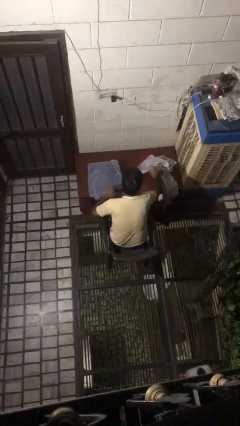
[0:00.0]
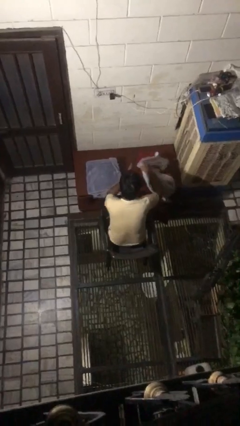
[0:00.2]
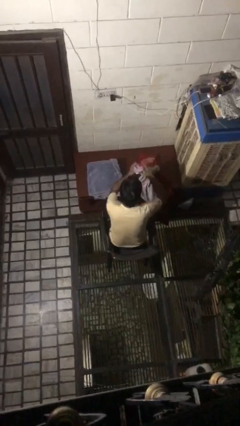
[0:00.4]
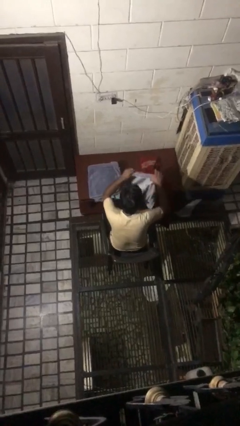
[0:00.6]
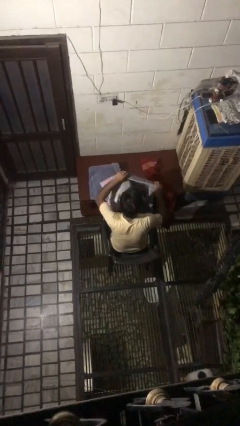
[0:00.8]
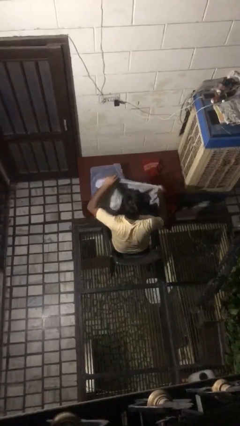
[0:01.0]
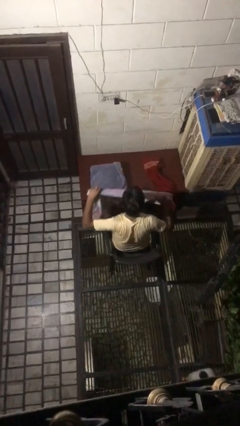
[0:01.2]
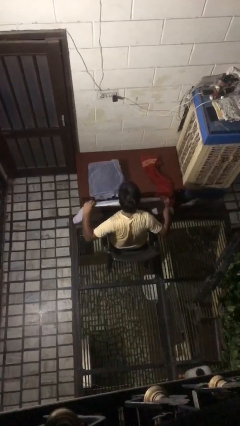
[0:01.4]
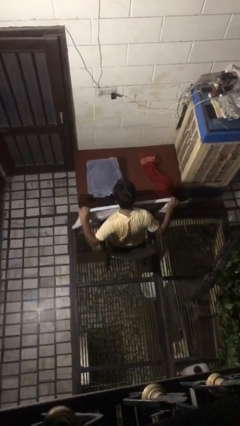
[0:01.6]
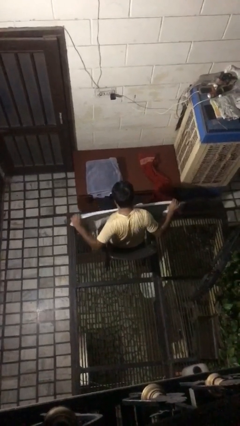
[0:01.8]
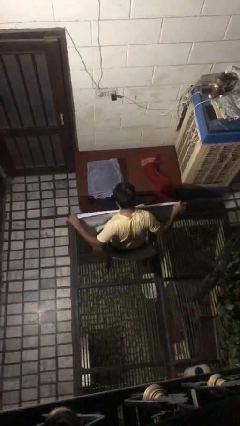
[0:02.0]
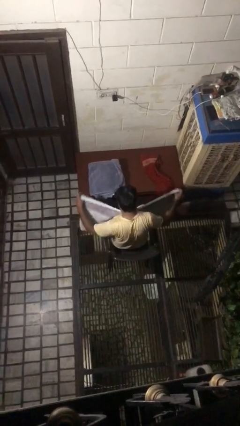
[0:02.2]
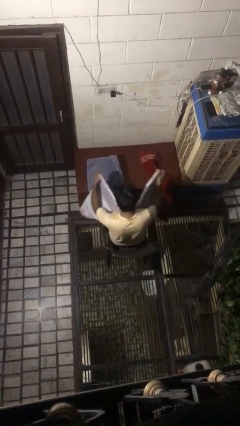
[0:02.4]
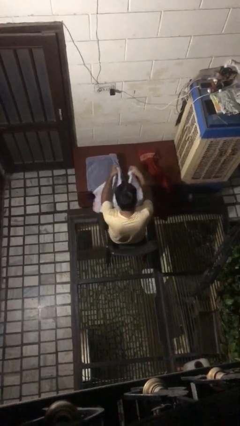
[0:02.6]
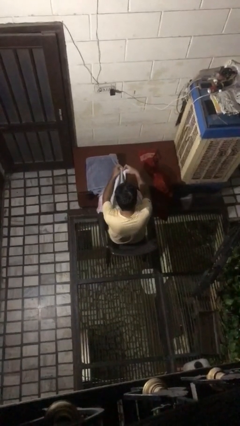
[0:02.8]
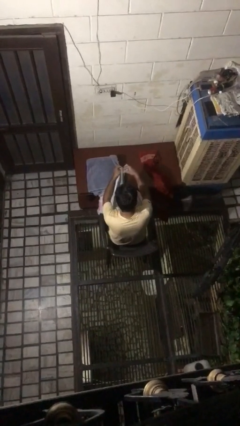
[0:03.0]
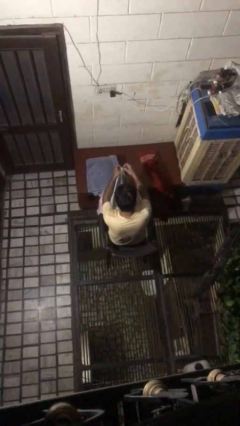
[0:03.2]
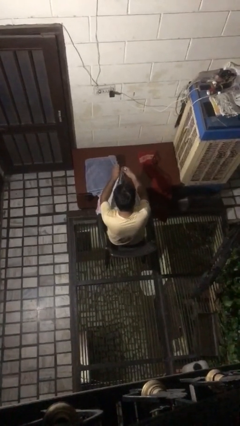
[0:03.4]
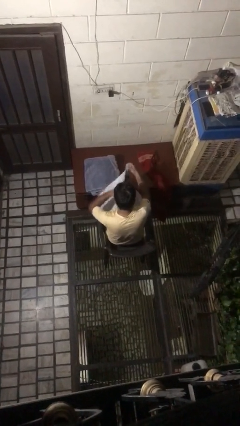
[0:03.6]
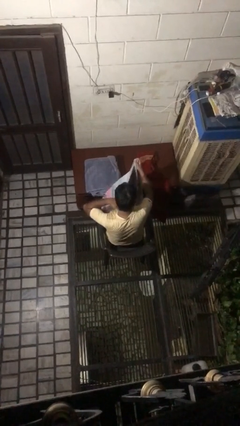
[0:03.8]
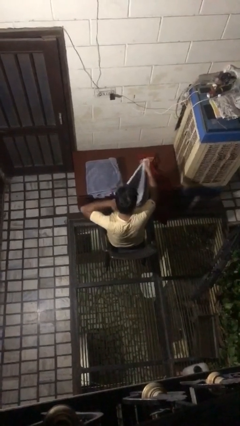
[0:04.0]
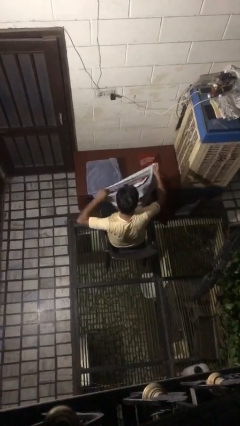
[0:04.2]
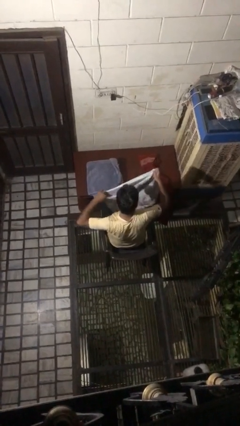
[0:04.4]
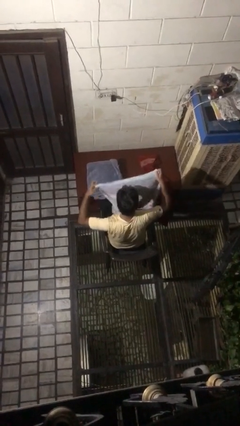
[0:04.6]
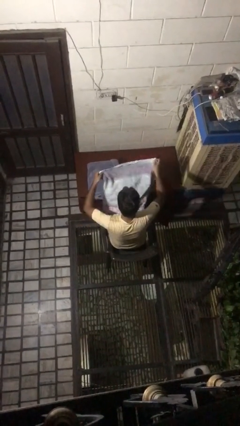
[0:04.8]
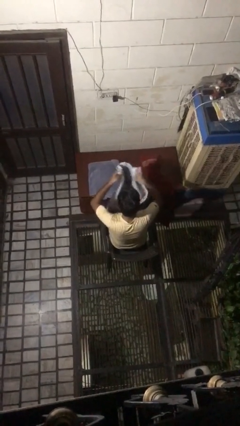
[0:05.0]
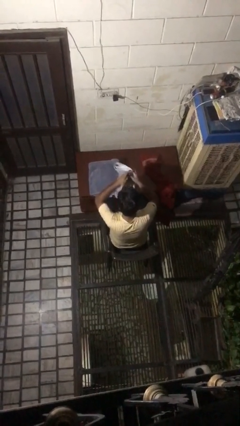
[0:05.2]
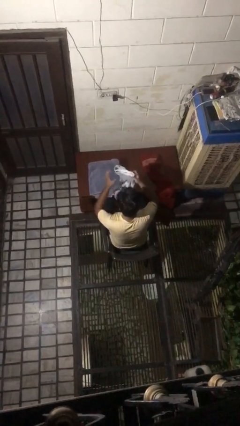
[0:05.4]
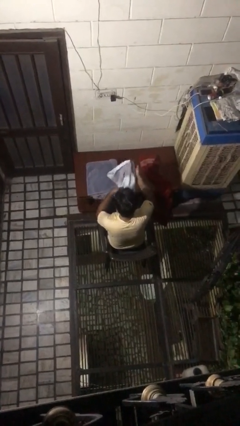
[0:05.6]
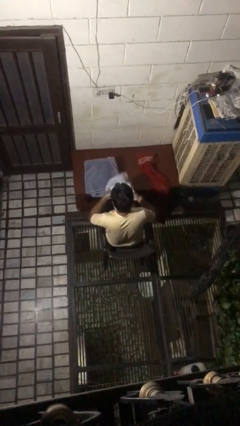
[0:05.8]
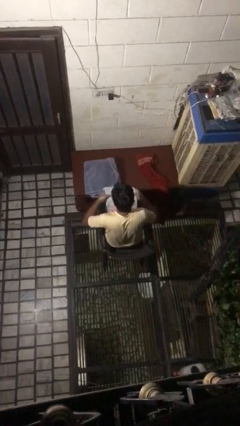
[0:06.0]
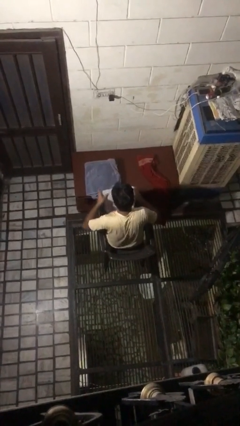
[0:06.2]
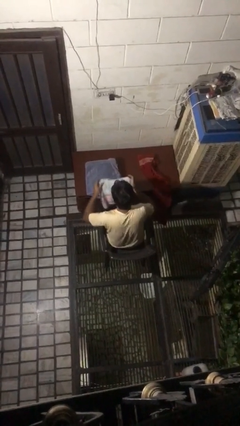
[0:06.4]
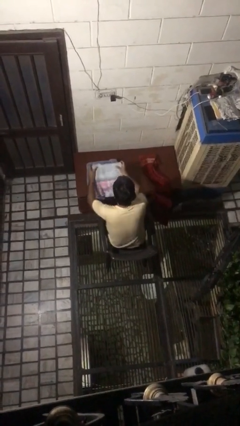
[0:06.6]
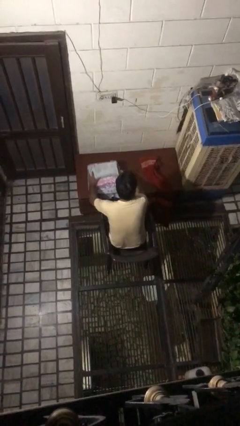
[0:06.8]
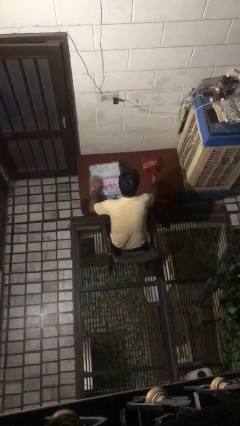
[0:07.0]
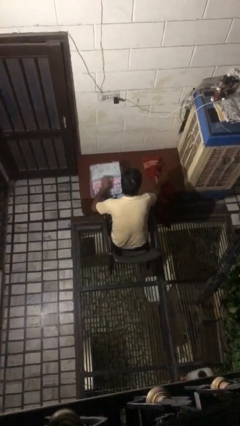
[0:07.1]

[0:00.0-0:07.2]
person folds towel

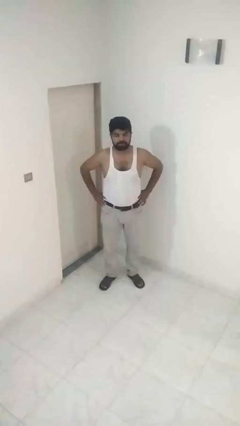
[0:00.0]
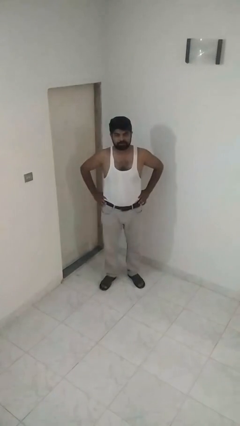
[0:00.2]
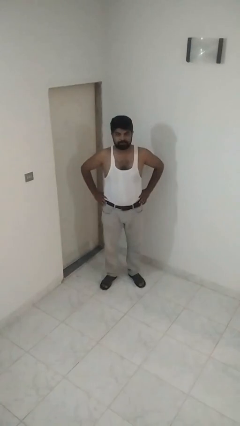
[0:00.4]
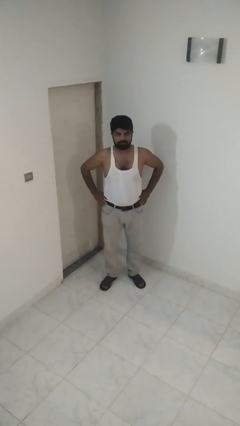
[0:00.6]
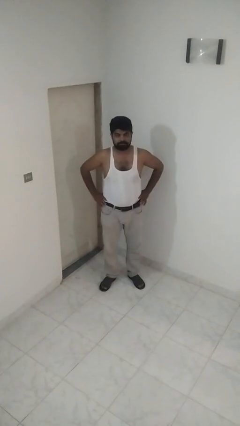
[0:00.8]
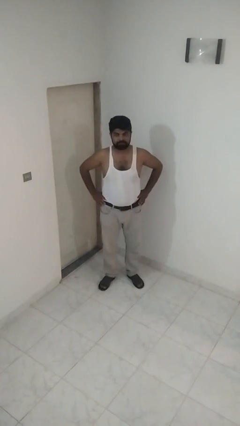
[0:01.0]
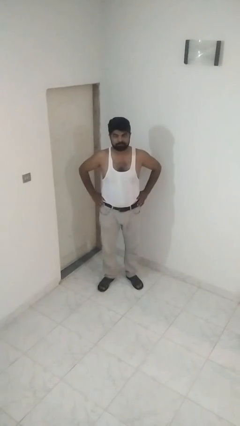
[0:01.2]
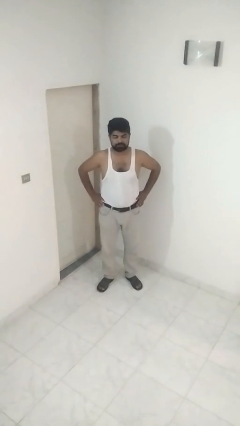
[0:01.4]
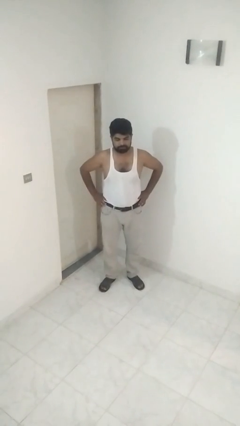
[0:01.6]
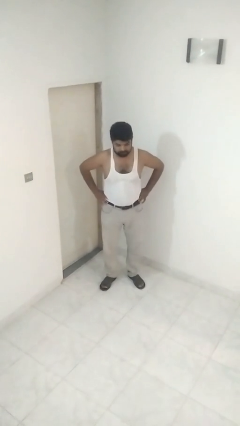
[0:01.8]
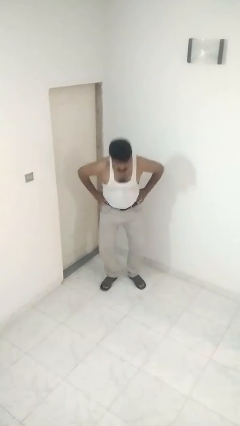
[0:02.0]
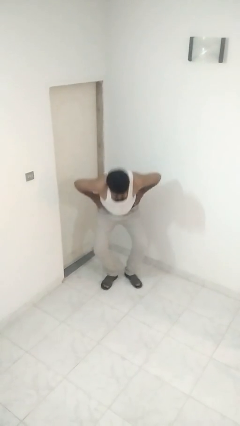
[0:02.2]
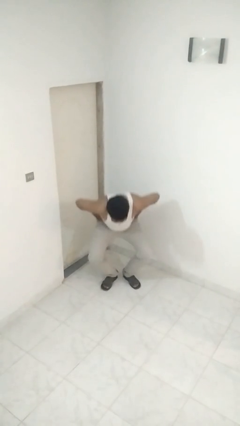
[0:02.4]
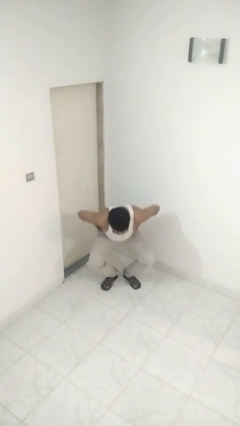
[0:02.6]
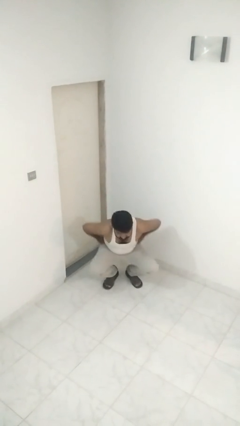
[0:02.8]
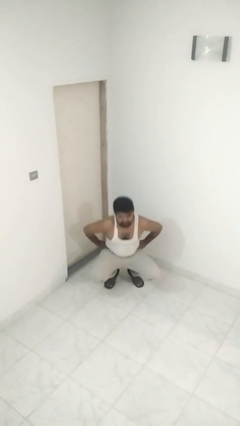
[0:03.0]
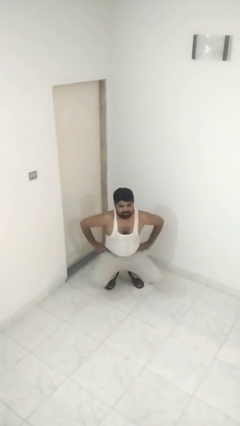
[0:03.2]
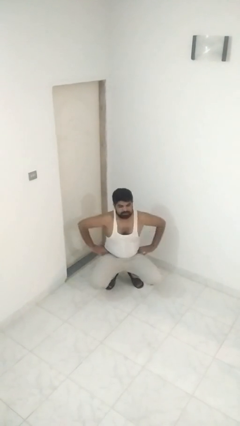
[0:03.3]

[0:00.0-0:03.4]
person squats

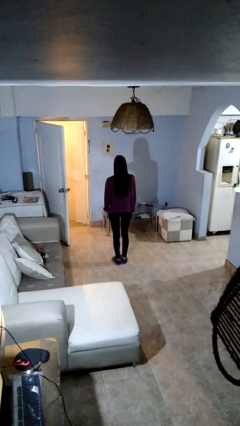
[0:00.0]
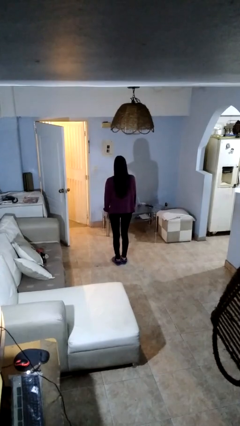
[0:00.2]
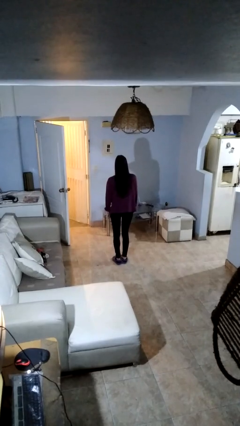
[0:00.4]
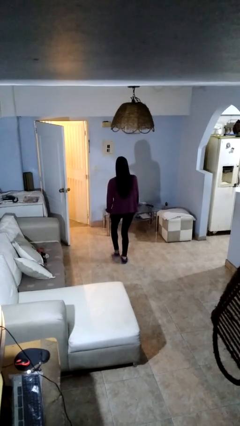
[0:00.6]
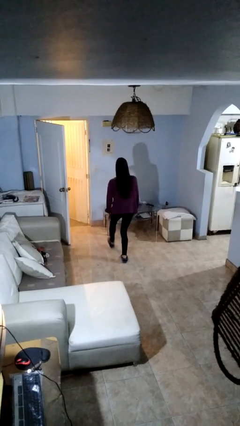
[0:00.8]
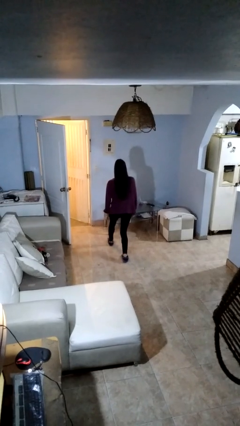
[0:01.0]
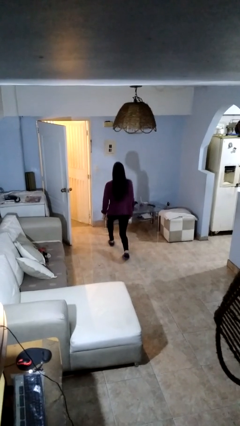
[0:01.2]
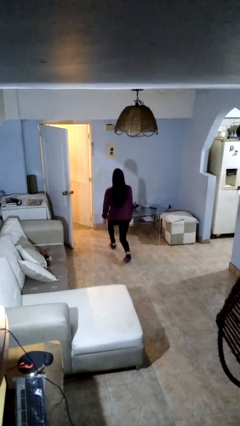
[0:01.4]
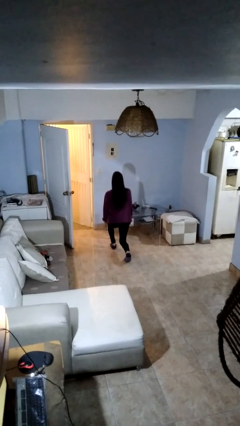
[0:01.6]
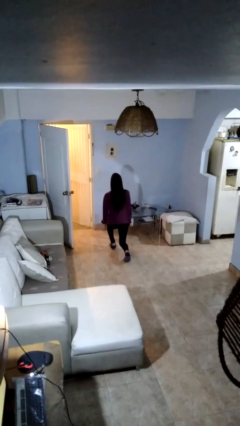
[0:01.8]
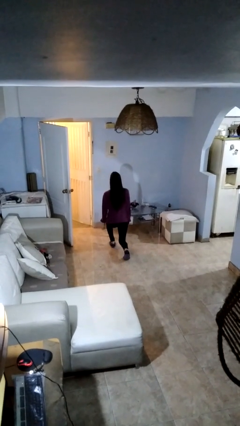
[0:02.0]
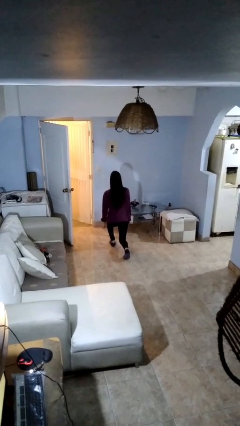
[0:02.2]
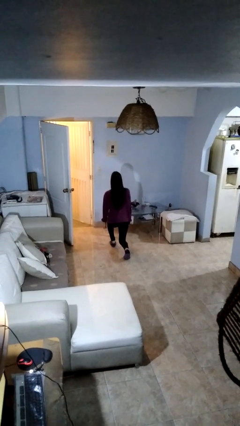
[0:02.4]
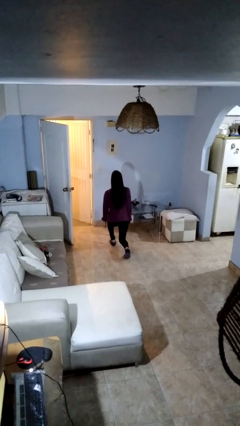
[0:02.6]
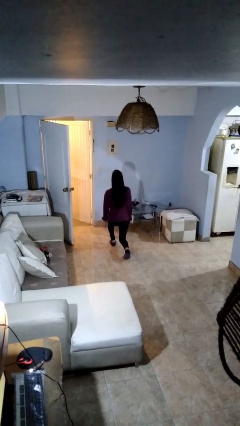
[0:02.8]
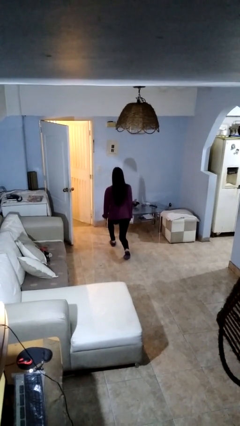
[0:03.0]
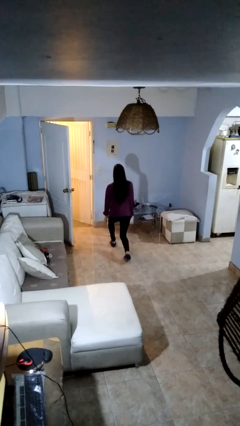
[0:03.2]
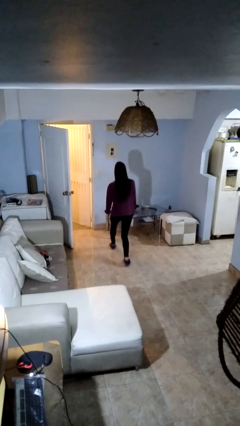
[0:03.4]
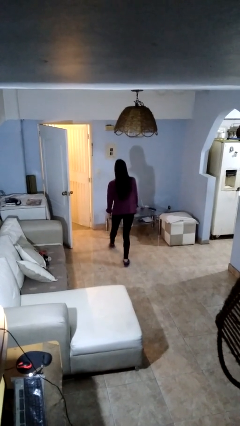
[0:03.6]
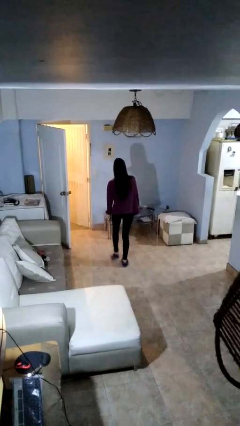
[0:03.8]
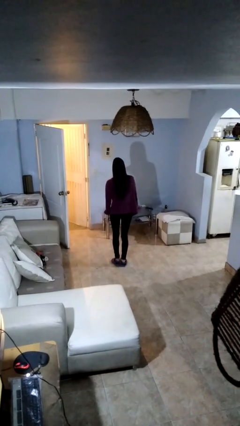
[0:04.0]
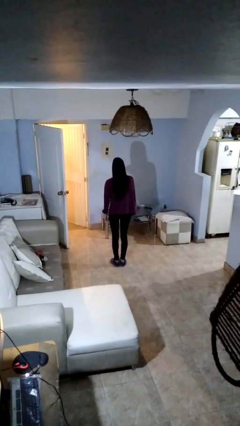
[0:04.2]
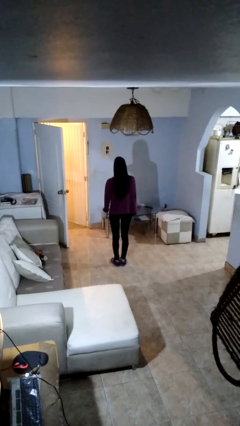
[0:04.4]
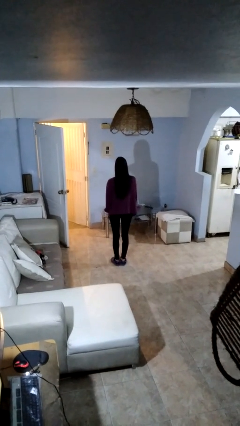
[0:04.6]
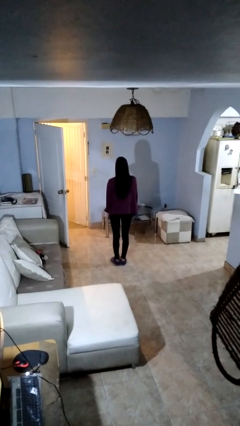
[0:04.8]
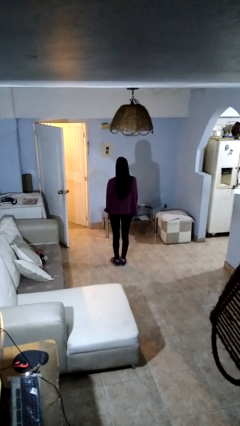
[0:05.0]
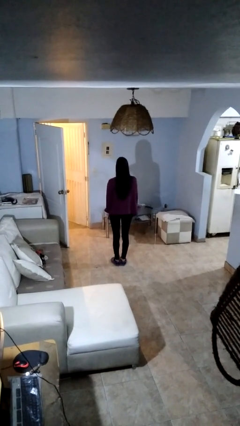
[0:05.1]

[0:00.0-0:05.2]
person exercises with lunges

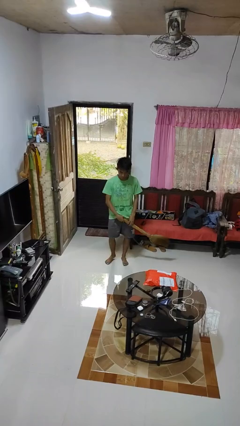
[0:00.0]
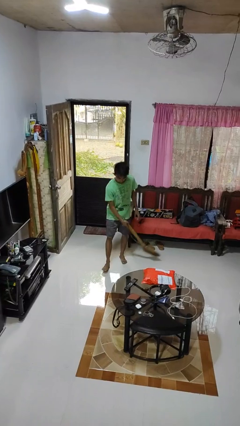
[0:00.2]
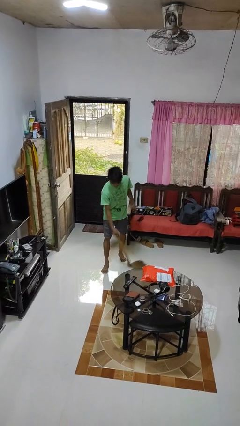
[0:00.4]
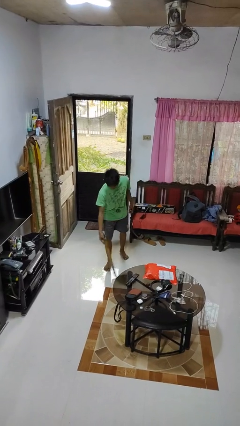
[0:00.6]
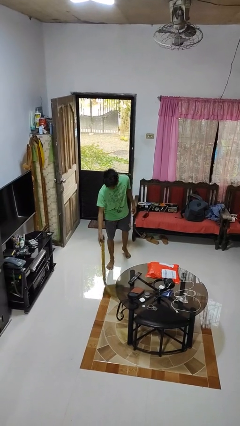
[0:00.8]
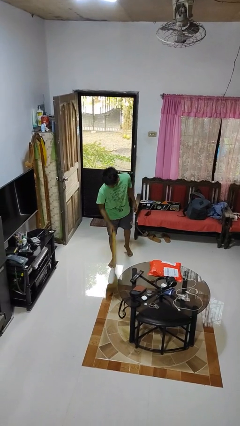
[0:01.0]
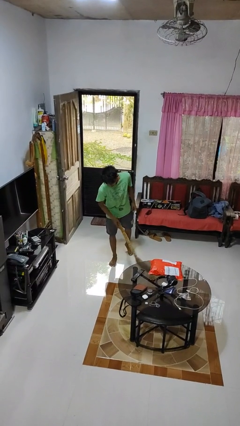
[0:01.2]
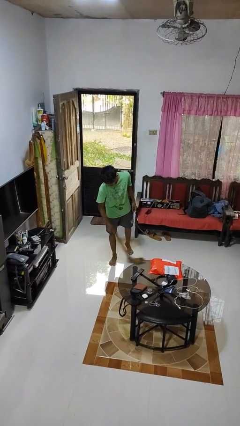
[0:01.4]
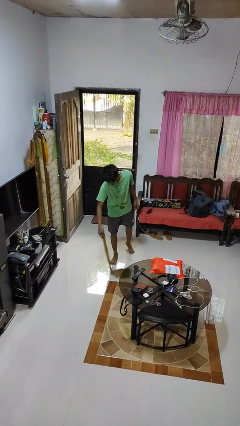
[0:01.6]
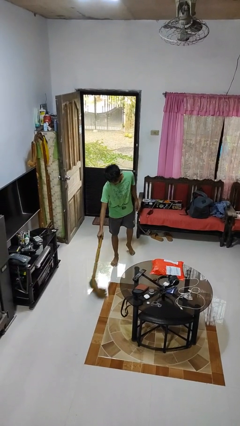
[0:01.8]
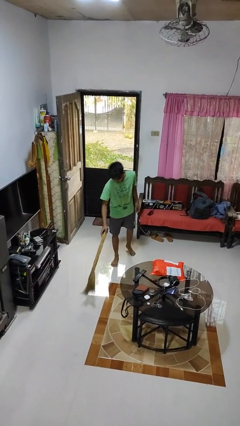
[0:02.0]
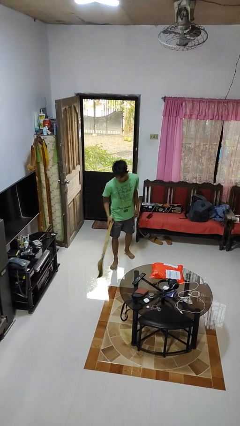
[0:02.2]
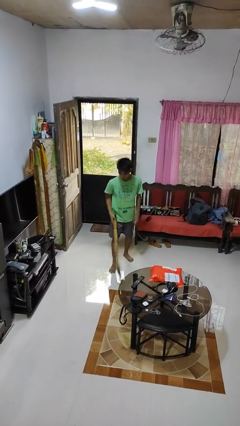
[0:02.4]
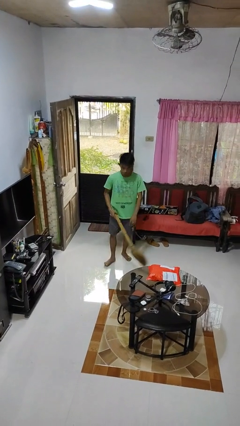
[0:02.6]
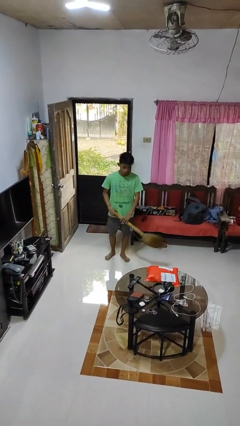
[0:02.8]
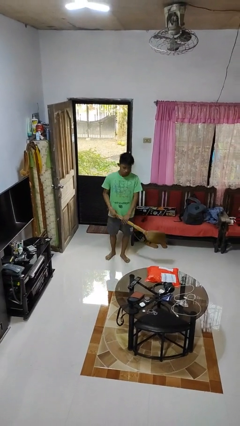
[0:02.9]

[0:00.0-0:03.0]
person sweeps floor
